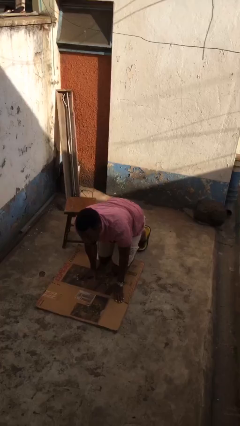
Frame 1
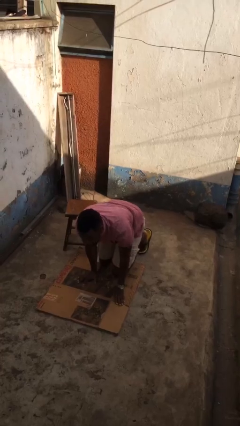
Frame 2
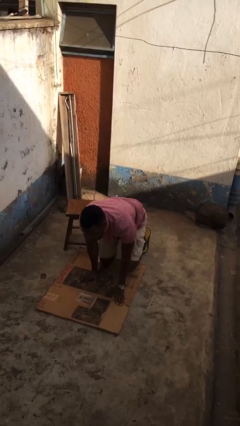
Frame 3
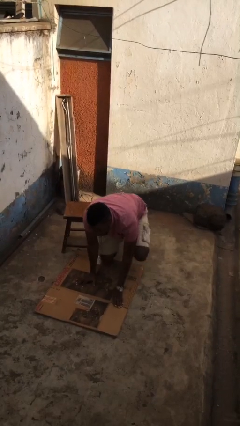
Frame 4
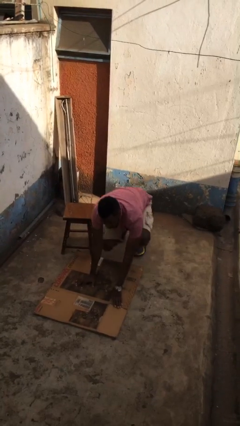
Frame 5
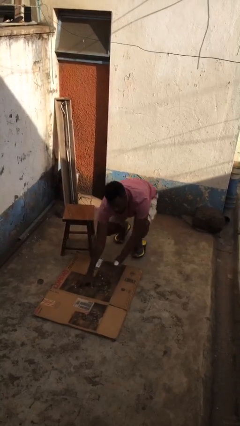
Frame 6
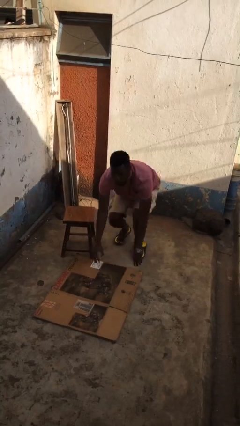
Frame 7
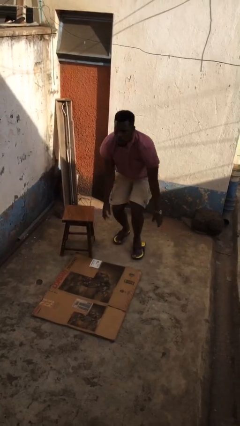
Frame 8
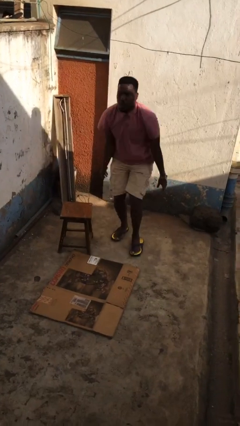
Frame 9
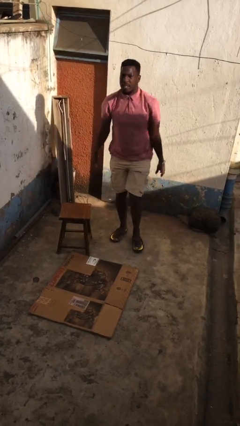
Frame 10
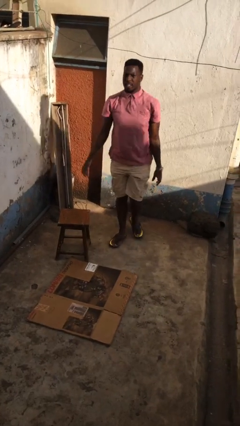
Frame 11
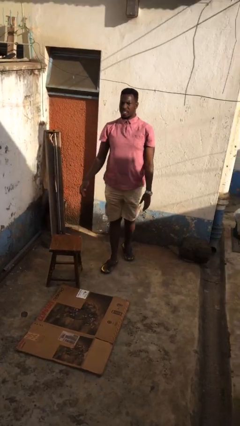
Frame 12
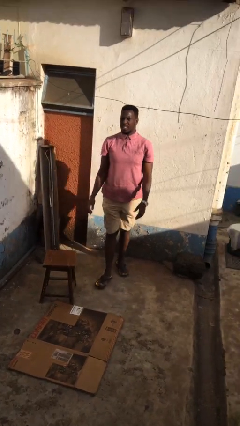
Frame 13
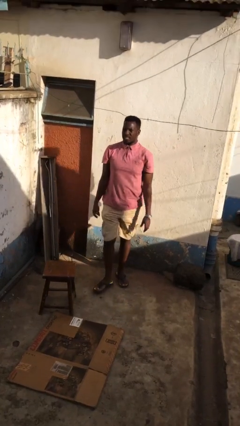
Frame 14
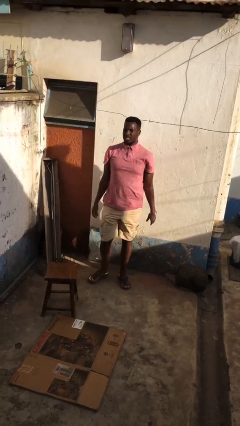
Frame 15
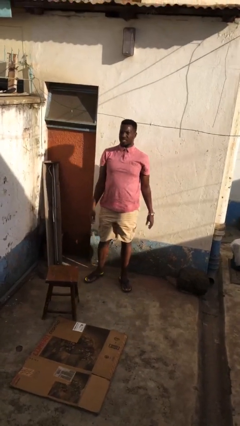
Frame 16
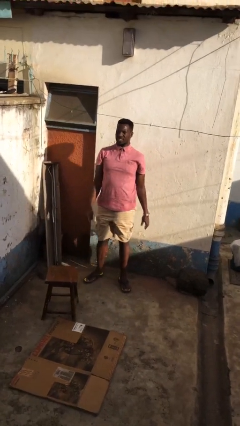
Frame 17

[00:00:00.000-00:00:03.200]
person stands up from floor

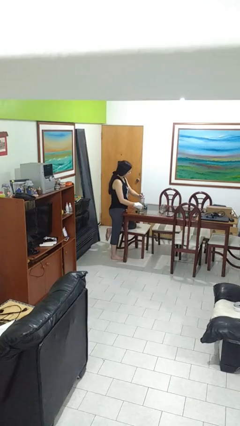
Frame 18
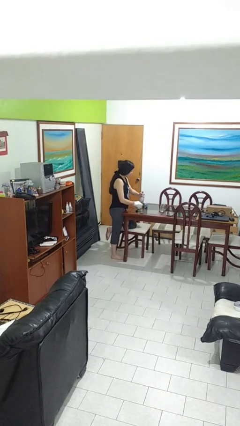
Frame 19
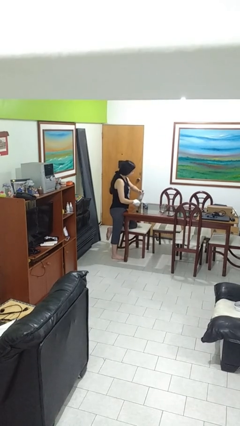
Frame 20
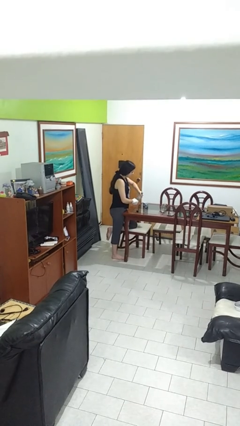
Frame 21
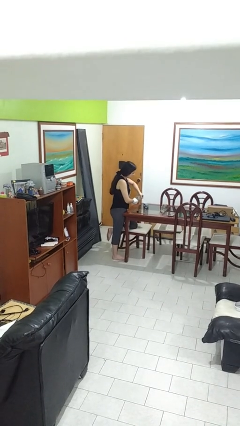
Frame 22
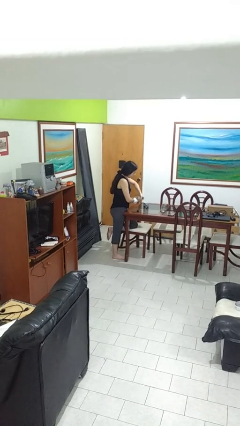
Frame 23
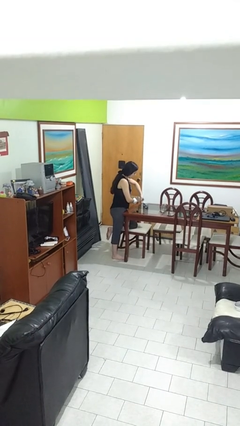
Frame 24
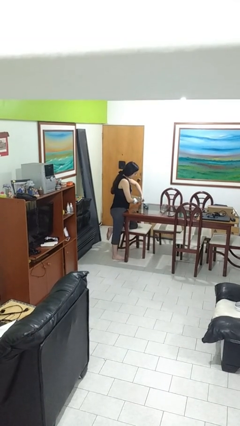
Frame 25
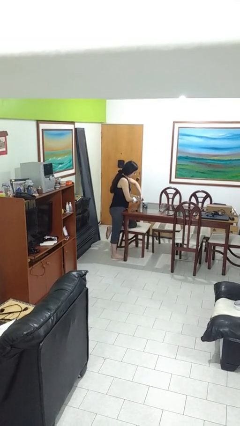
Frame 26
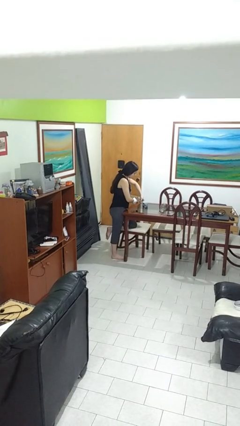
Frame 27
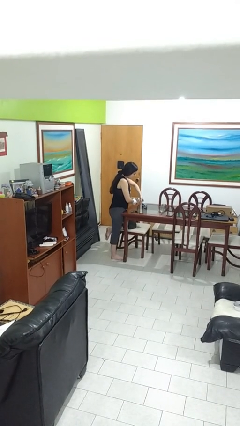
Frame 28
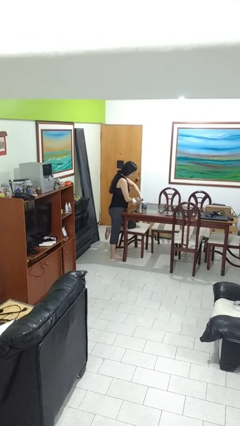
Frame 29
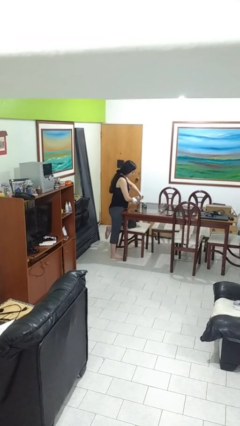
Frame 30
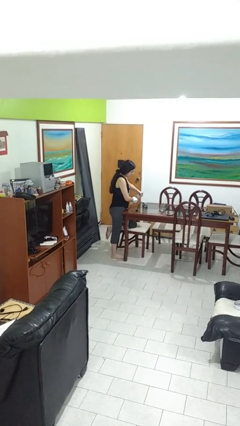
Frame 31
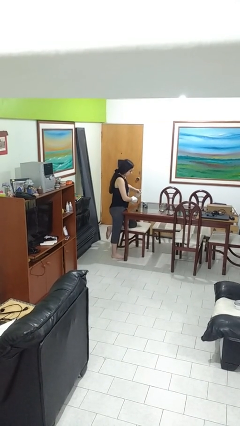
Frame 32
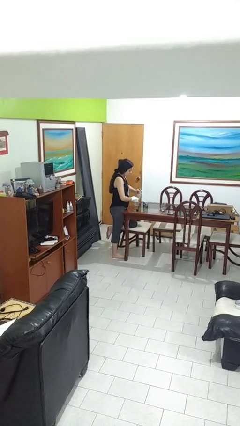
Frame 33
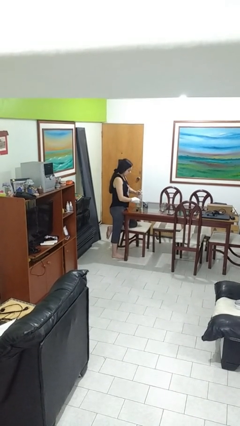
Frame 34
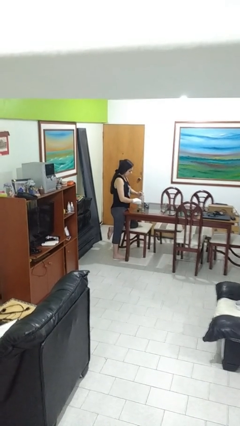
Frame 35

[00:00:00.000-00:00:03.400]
person pours liquid into cup

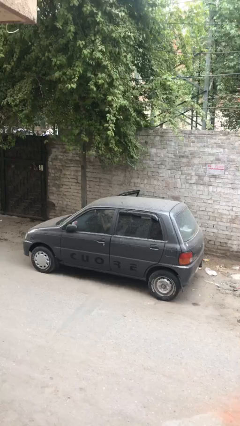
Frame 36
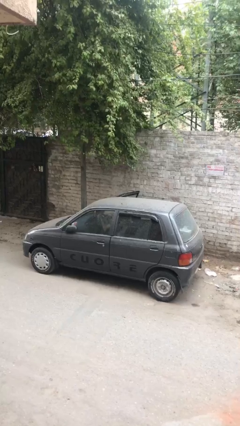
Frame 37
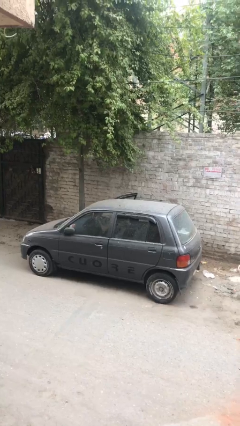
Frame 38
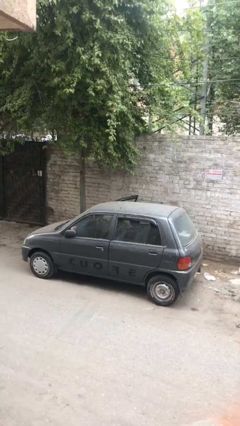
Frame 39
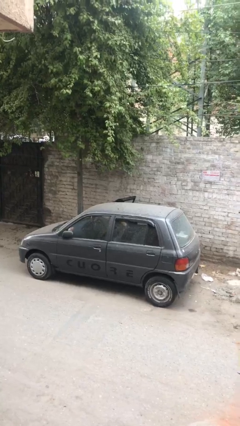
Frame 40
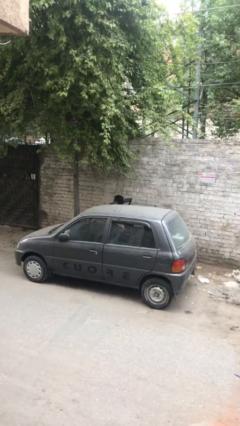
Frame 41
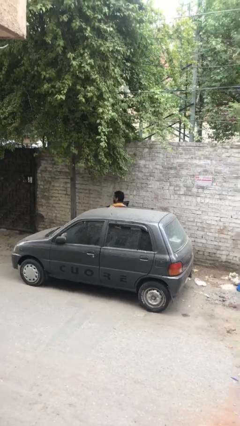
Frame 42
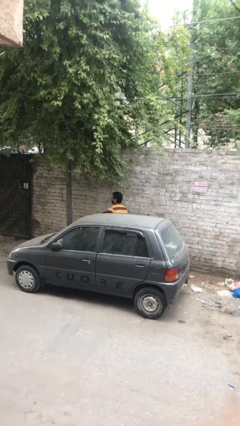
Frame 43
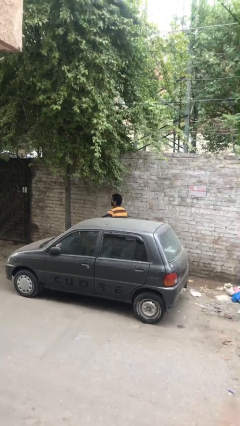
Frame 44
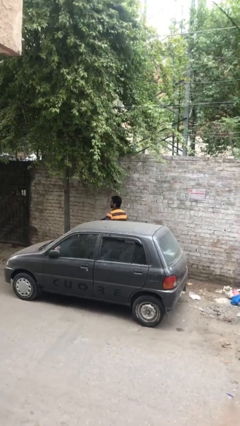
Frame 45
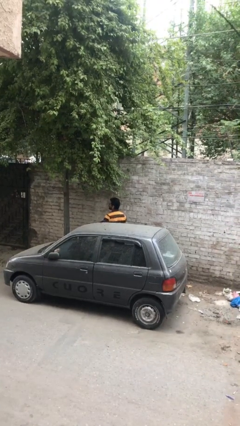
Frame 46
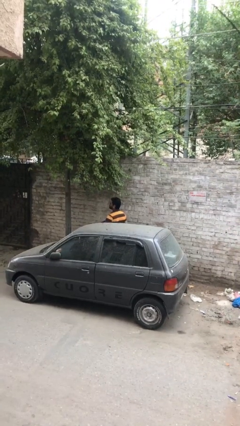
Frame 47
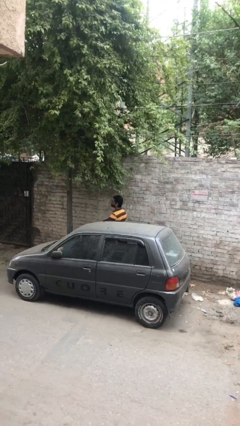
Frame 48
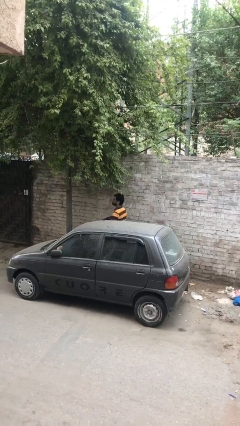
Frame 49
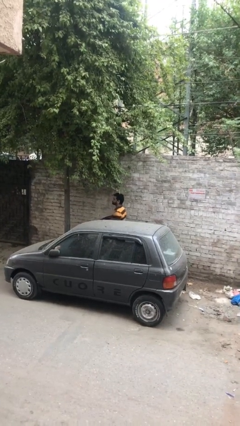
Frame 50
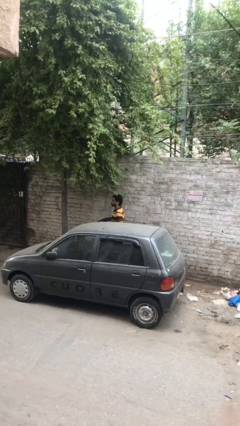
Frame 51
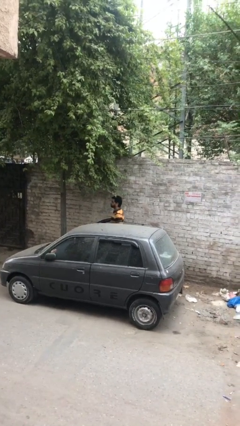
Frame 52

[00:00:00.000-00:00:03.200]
person exits car

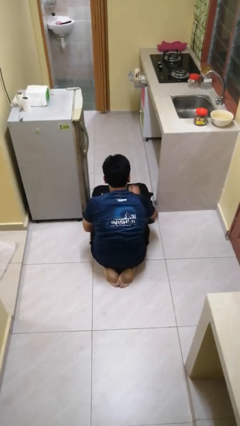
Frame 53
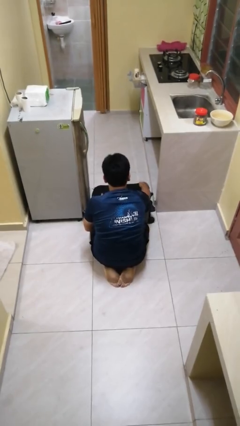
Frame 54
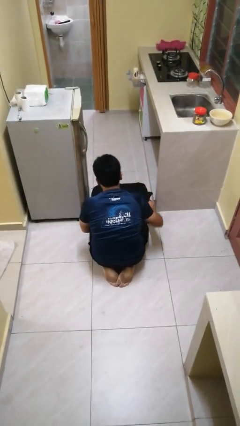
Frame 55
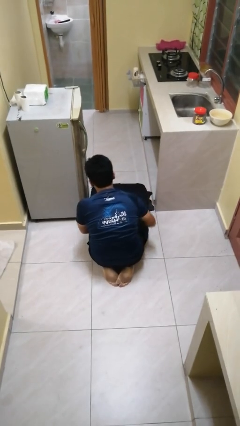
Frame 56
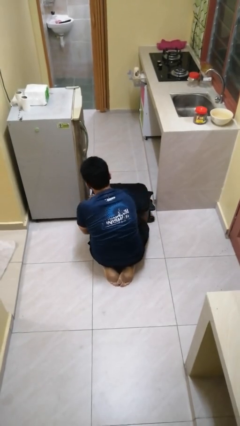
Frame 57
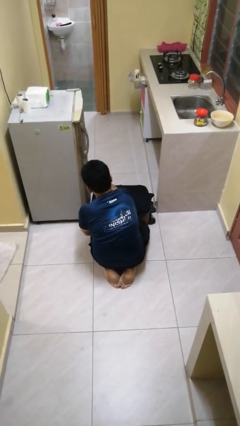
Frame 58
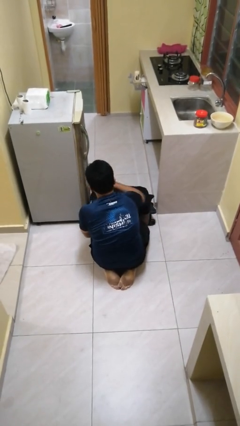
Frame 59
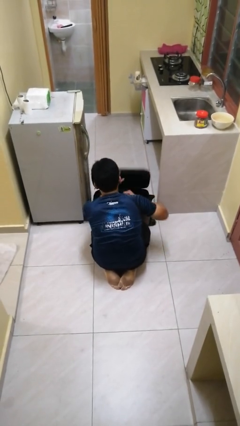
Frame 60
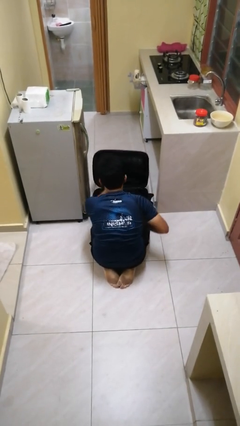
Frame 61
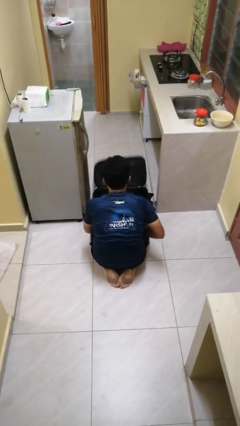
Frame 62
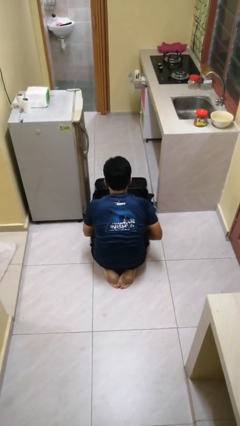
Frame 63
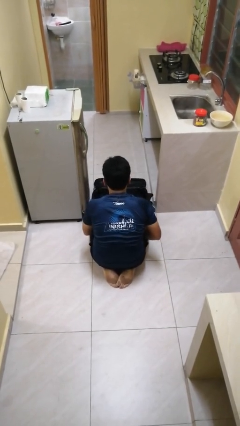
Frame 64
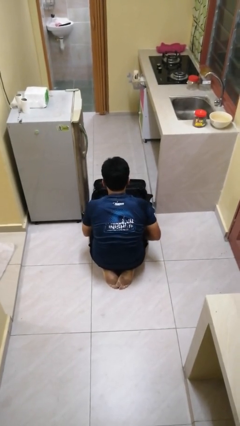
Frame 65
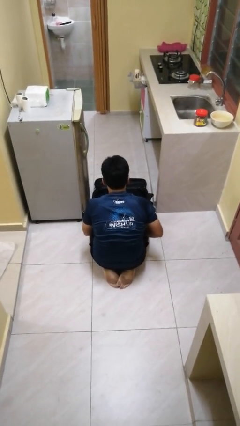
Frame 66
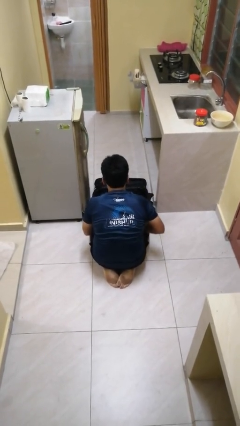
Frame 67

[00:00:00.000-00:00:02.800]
person opens suitcase

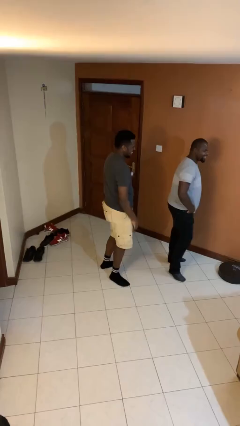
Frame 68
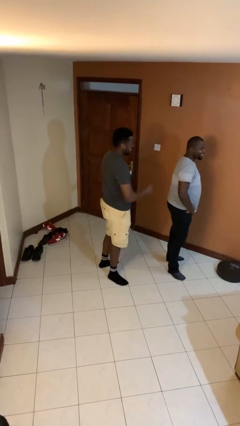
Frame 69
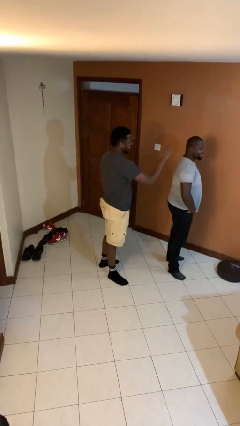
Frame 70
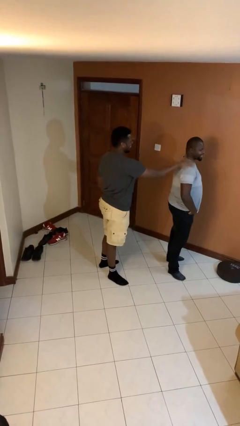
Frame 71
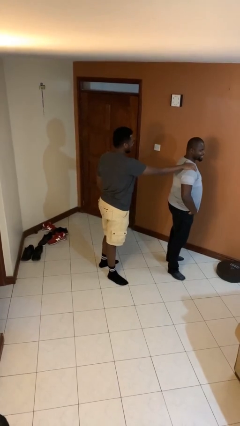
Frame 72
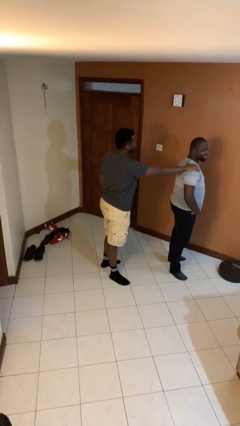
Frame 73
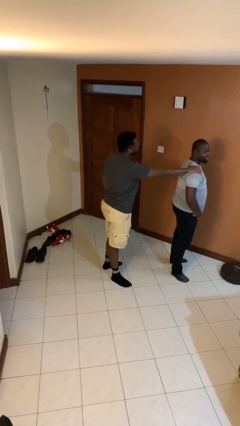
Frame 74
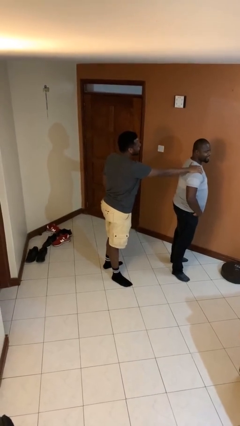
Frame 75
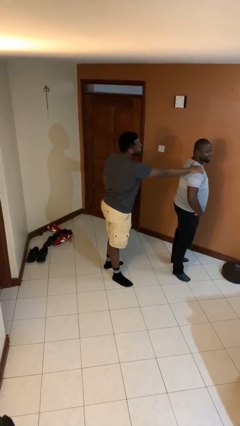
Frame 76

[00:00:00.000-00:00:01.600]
person grabs person by shoulder

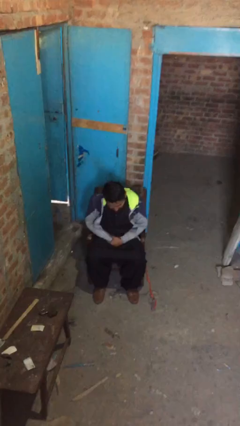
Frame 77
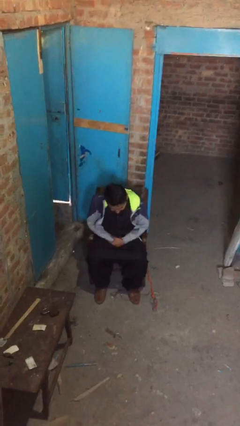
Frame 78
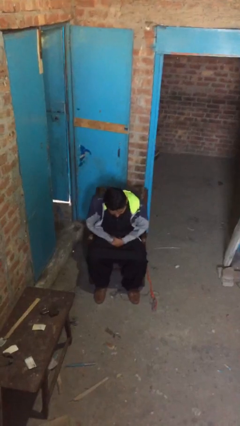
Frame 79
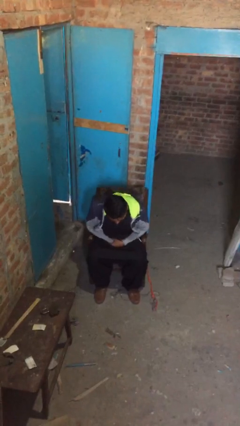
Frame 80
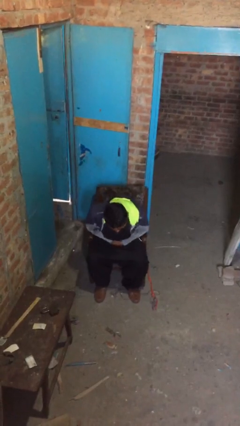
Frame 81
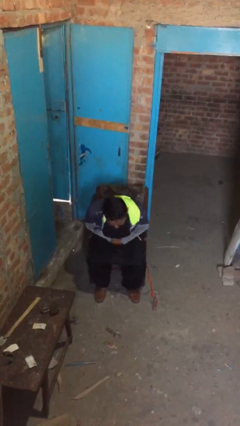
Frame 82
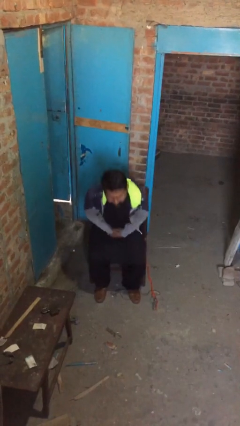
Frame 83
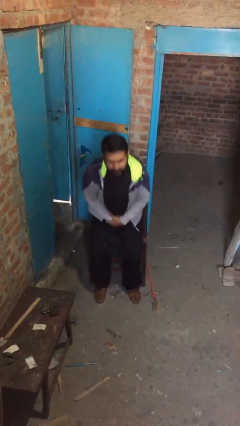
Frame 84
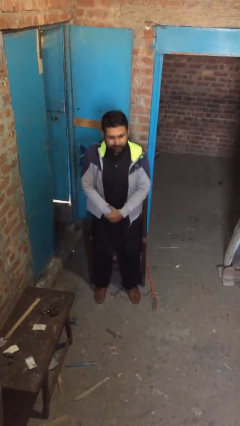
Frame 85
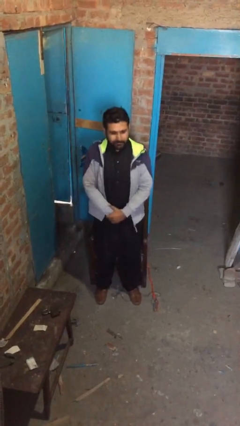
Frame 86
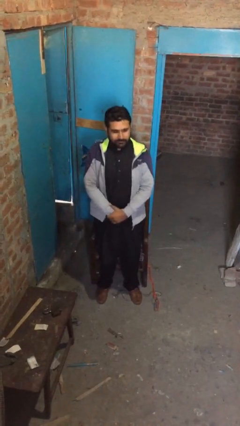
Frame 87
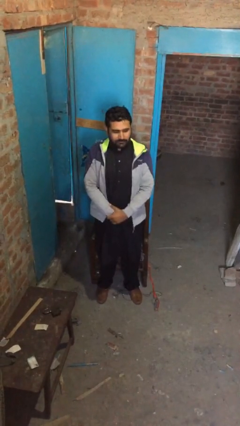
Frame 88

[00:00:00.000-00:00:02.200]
person stands up

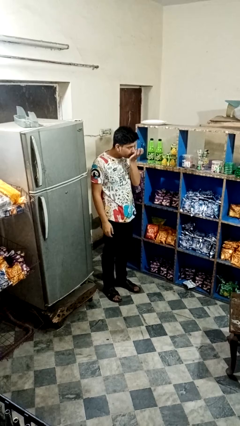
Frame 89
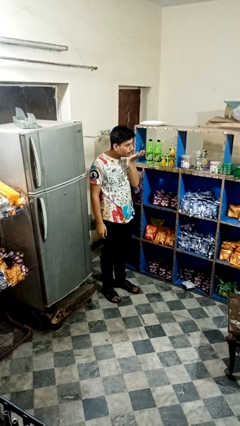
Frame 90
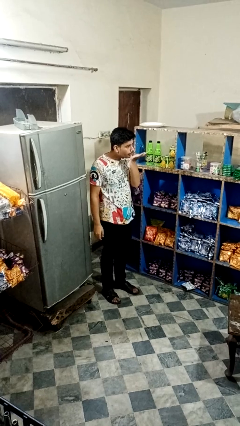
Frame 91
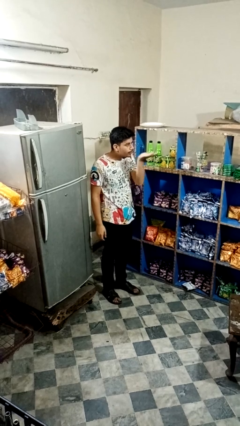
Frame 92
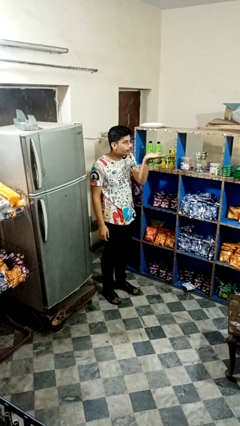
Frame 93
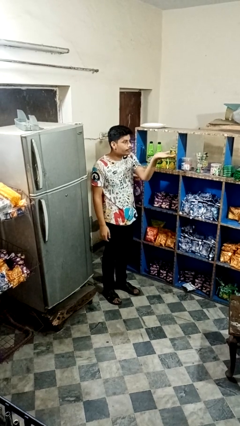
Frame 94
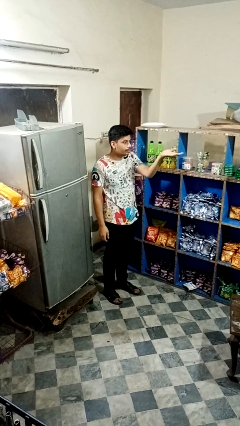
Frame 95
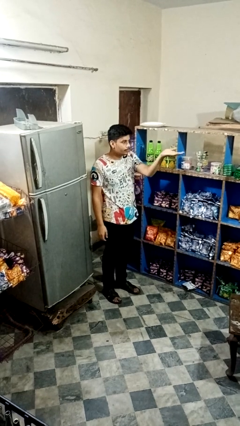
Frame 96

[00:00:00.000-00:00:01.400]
person gestures blow kiss
